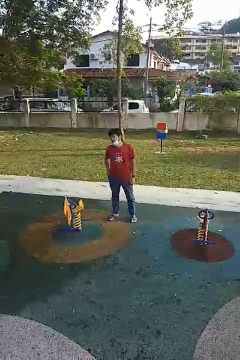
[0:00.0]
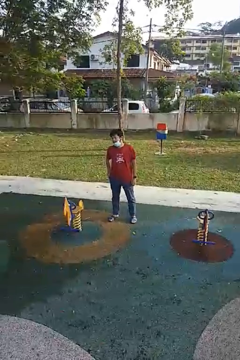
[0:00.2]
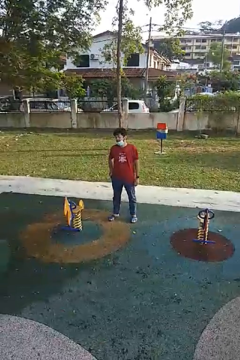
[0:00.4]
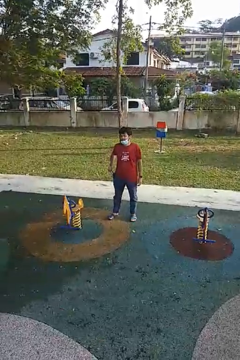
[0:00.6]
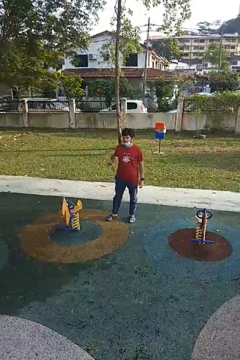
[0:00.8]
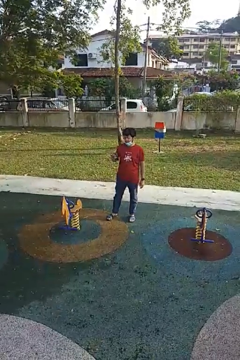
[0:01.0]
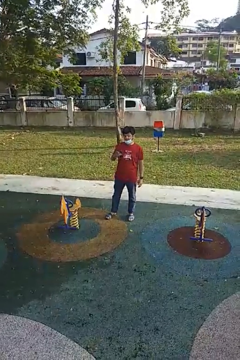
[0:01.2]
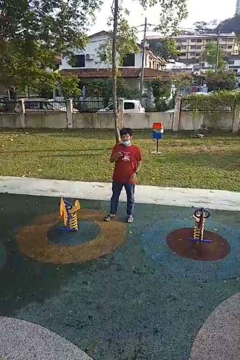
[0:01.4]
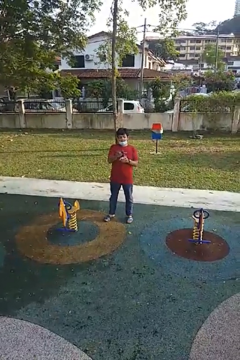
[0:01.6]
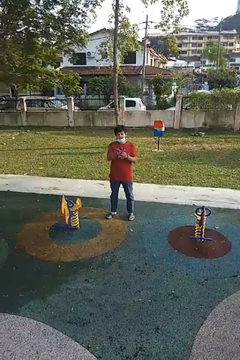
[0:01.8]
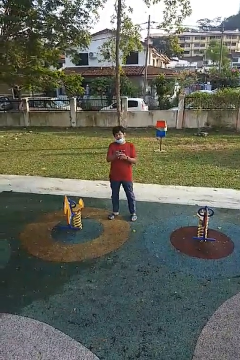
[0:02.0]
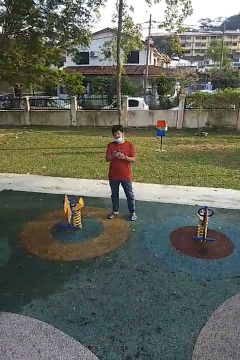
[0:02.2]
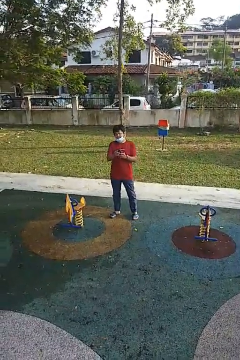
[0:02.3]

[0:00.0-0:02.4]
person takes phone from pocket

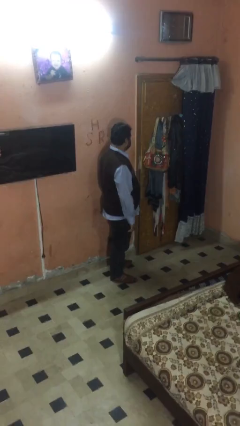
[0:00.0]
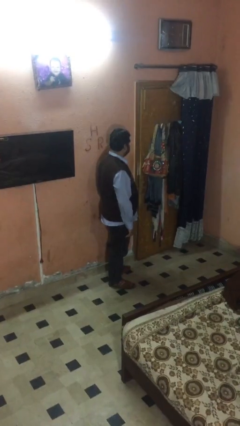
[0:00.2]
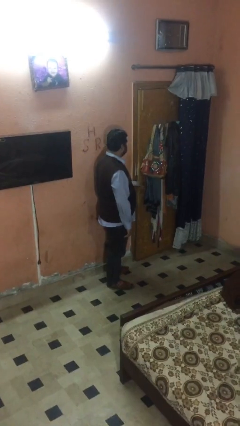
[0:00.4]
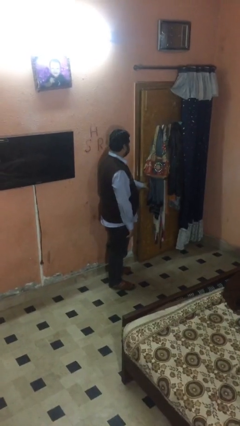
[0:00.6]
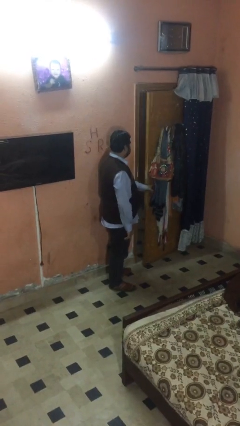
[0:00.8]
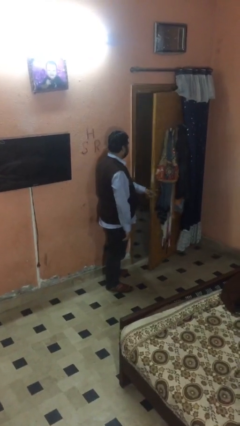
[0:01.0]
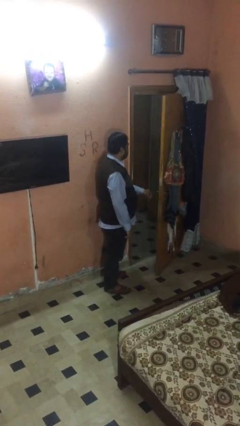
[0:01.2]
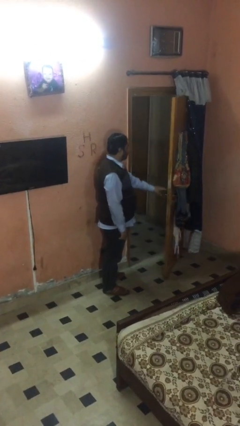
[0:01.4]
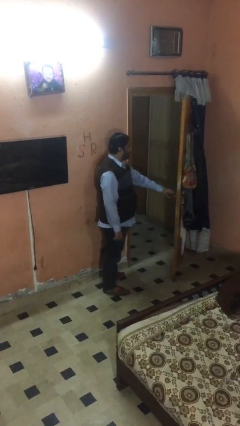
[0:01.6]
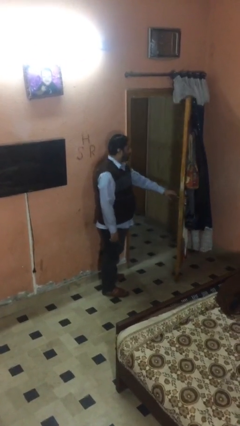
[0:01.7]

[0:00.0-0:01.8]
person opens facility door

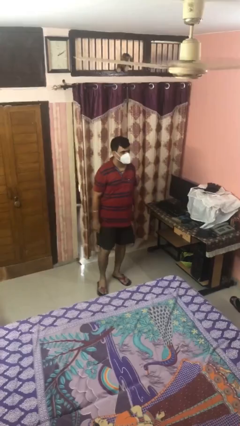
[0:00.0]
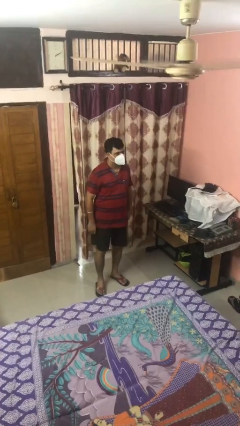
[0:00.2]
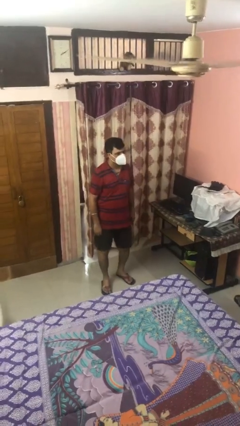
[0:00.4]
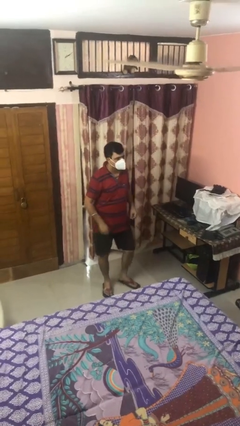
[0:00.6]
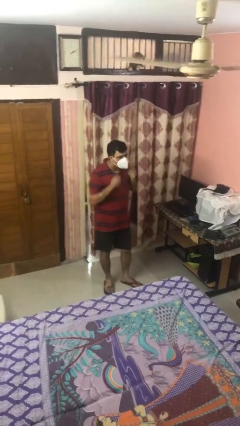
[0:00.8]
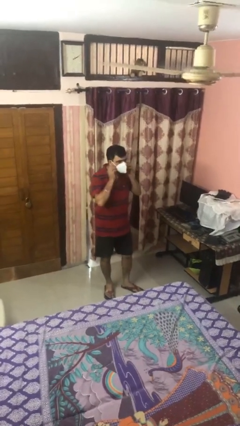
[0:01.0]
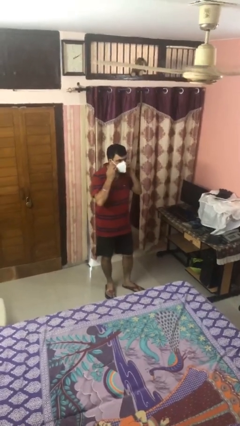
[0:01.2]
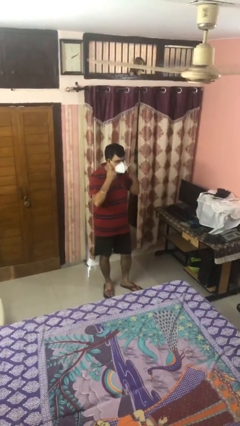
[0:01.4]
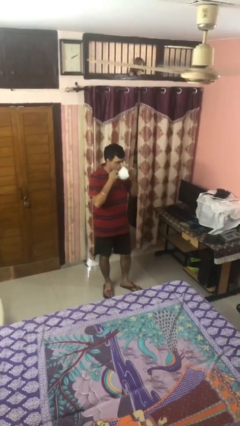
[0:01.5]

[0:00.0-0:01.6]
person takes off facemask

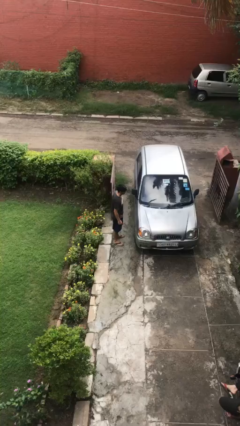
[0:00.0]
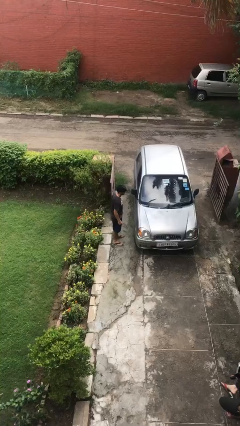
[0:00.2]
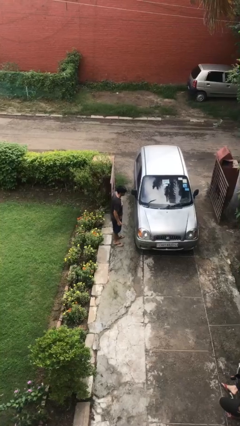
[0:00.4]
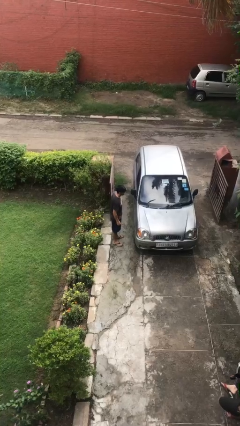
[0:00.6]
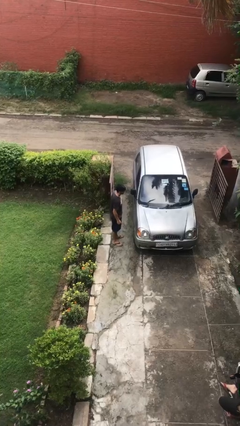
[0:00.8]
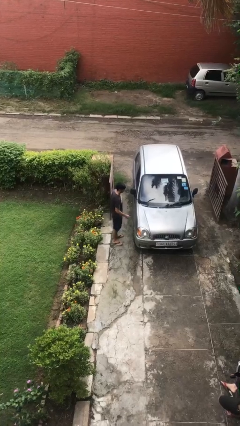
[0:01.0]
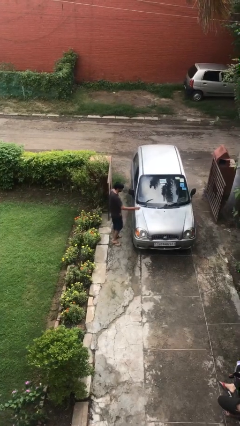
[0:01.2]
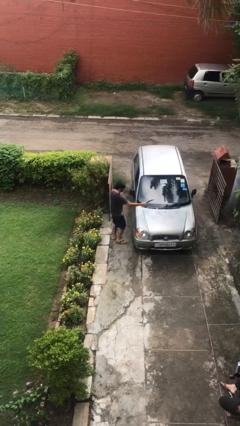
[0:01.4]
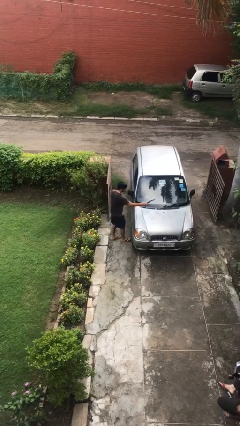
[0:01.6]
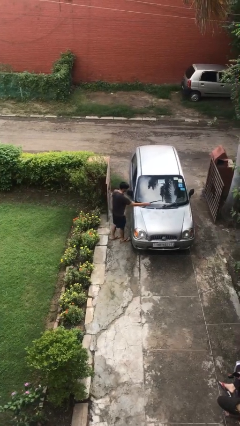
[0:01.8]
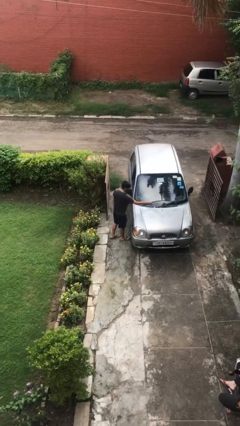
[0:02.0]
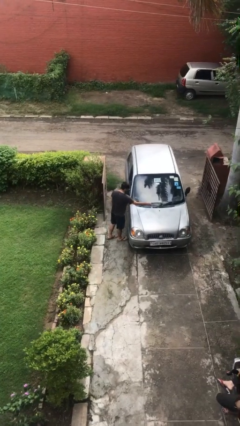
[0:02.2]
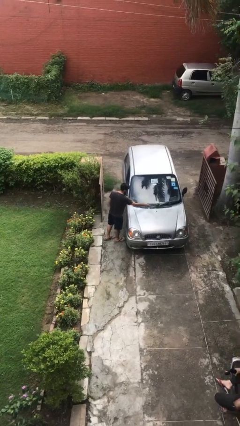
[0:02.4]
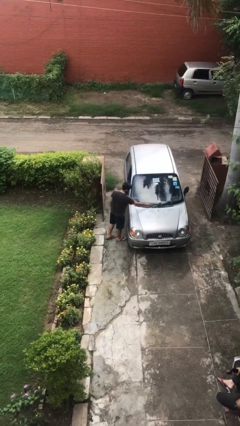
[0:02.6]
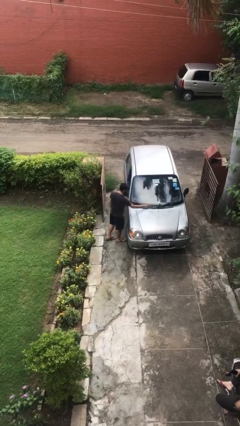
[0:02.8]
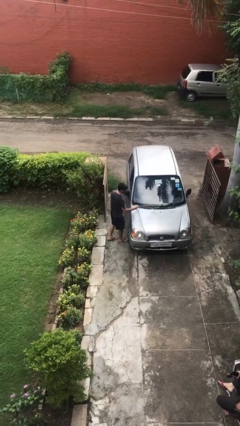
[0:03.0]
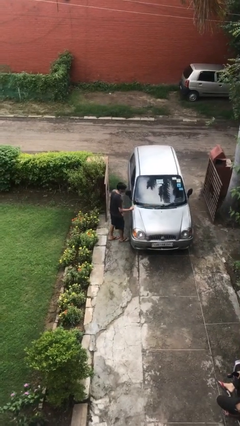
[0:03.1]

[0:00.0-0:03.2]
person flips down car wipers

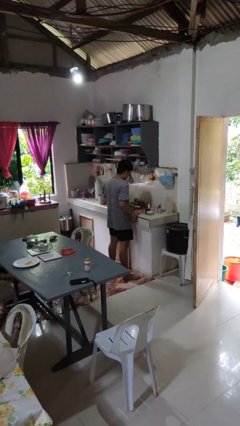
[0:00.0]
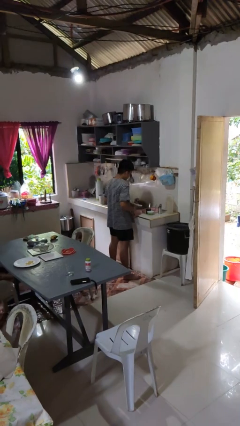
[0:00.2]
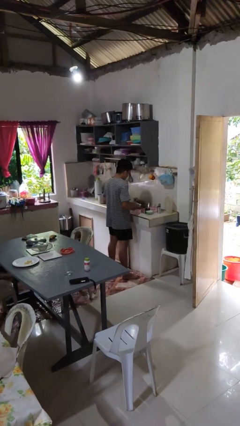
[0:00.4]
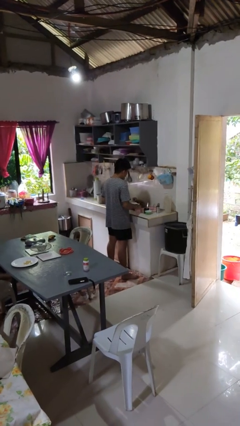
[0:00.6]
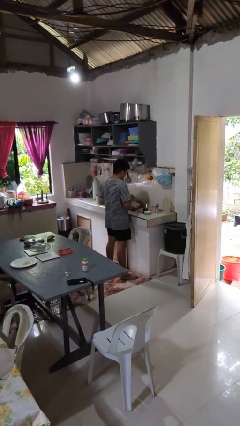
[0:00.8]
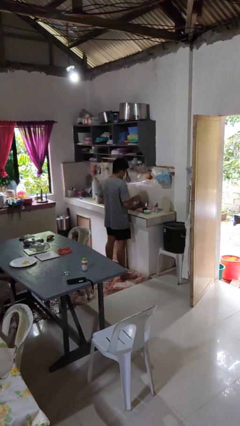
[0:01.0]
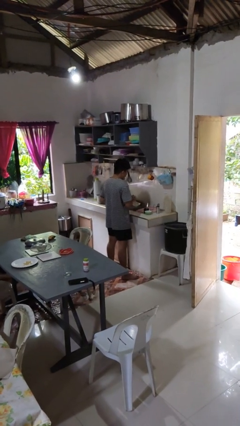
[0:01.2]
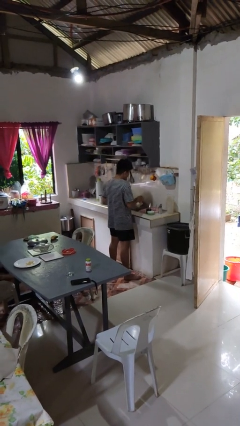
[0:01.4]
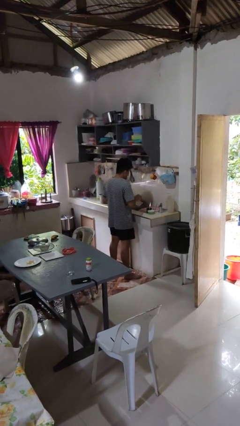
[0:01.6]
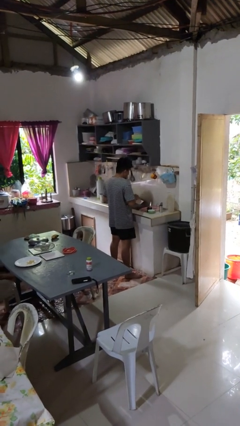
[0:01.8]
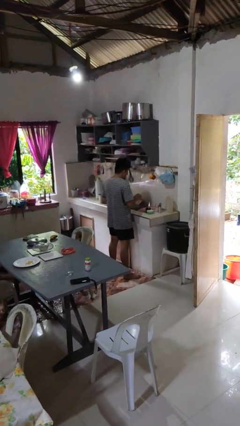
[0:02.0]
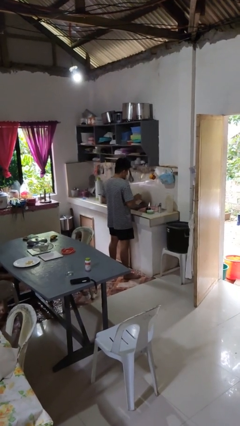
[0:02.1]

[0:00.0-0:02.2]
person washes dish

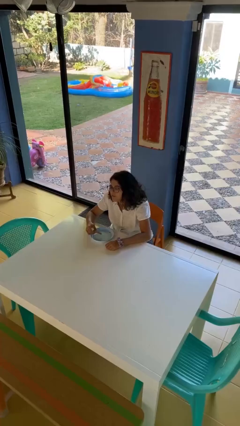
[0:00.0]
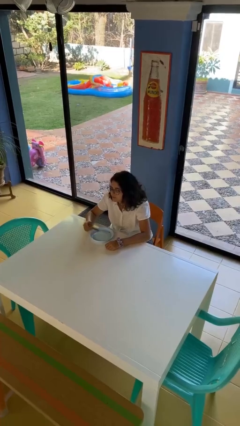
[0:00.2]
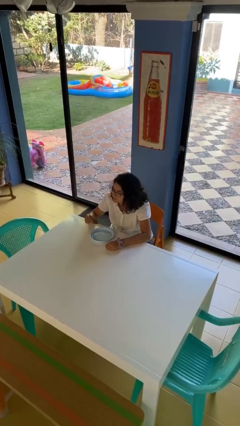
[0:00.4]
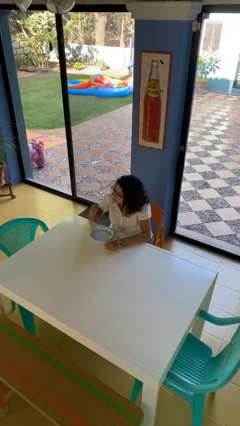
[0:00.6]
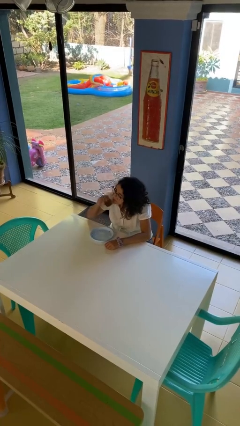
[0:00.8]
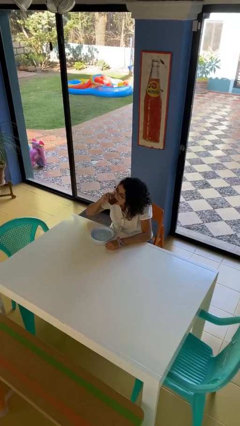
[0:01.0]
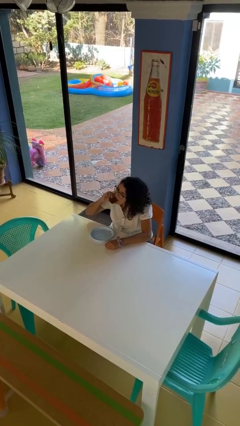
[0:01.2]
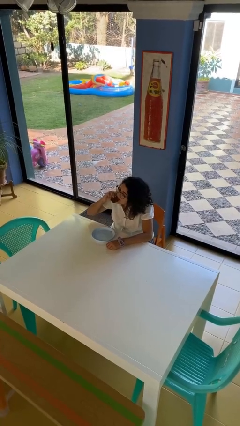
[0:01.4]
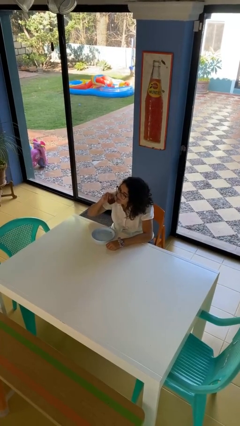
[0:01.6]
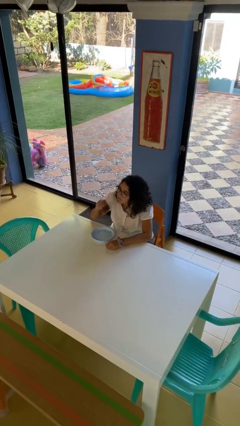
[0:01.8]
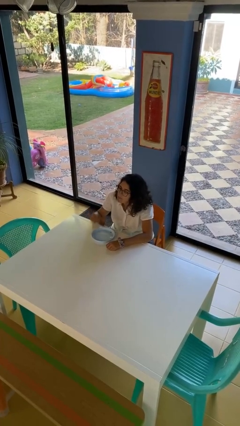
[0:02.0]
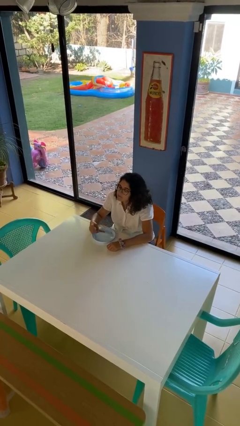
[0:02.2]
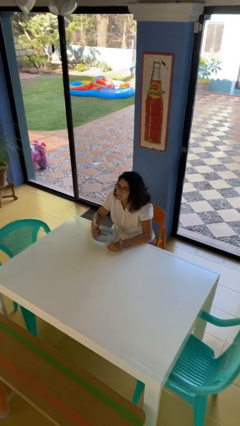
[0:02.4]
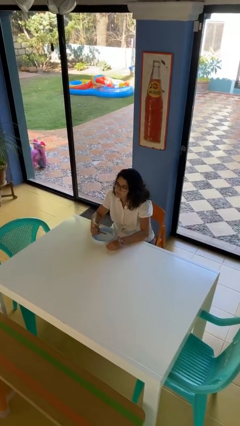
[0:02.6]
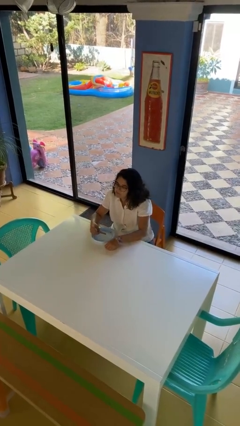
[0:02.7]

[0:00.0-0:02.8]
person eats with hands

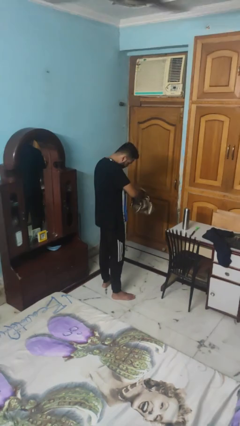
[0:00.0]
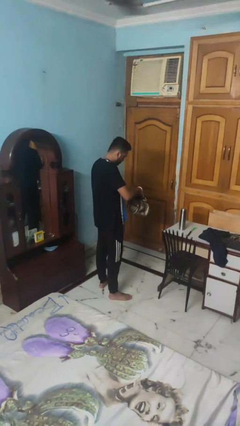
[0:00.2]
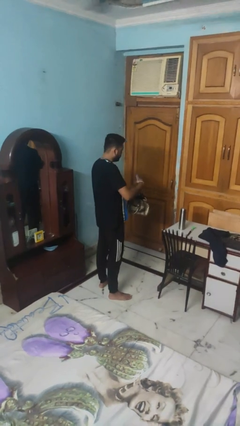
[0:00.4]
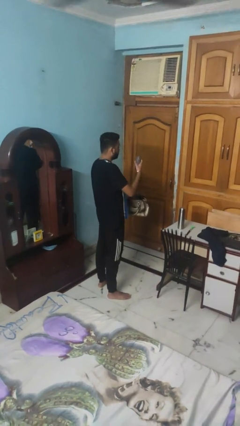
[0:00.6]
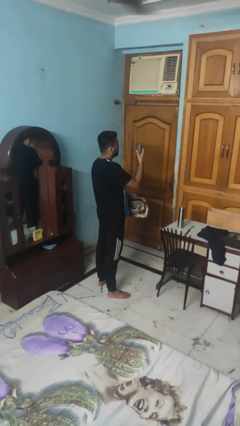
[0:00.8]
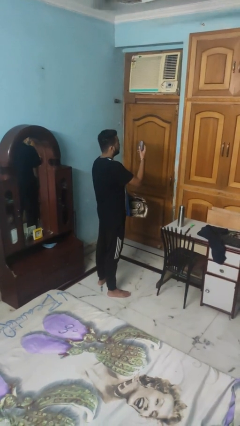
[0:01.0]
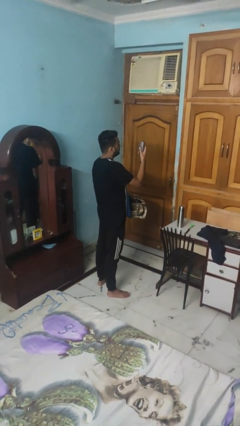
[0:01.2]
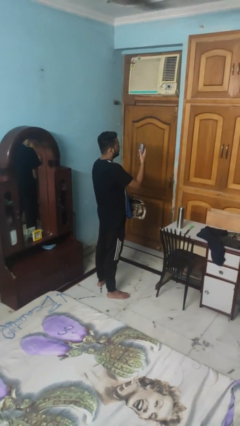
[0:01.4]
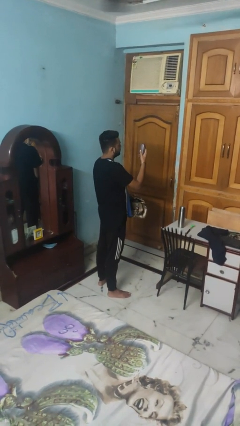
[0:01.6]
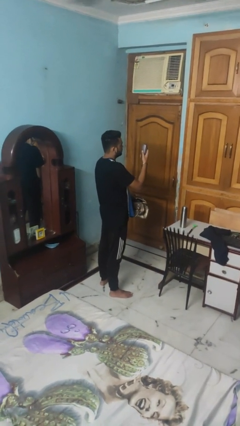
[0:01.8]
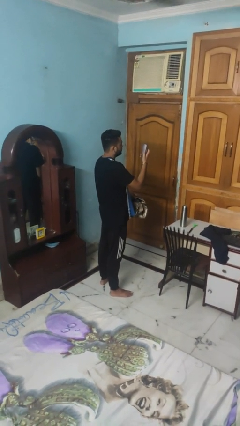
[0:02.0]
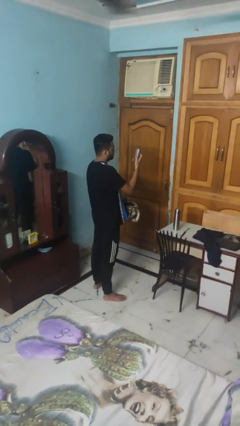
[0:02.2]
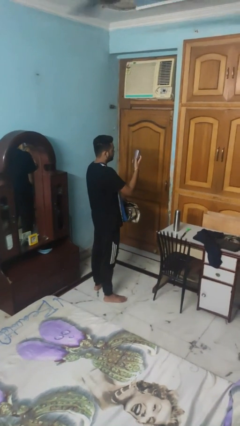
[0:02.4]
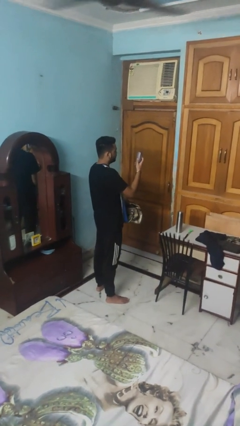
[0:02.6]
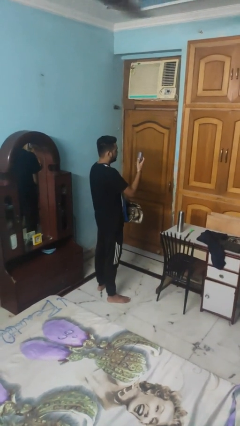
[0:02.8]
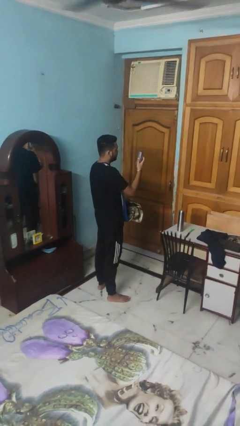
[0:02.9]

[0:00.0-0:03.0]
person takes object from purse

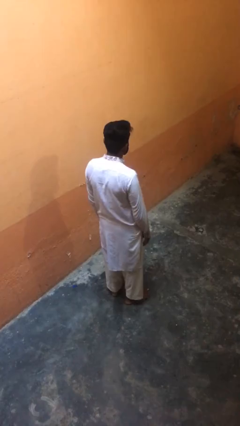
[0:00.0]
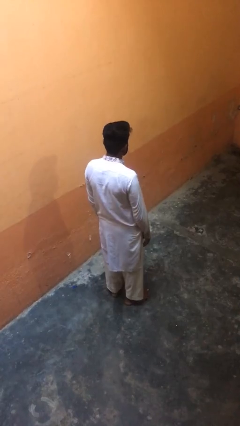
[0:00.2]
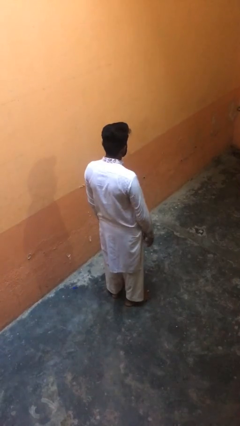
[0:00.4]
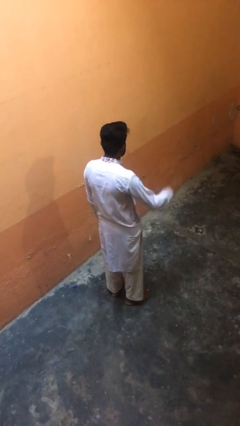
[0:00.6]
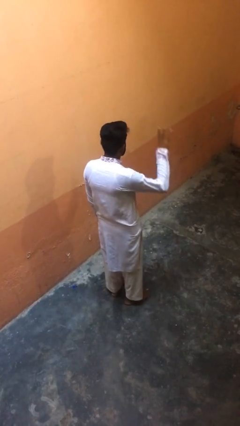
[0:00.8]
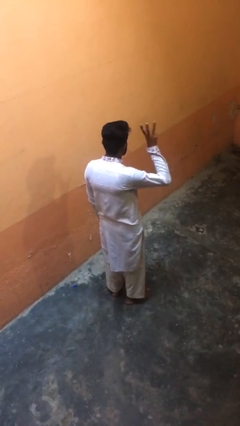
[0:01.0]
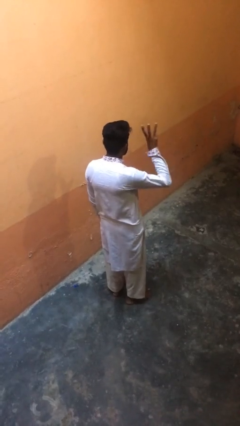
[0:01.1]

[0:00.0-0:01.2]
person gestures number three
